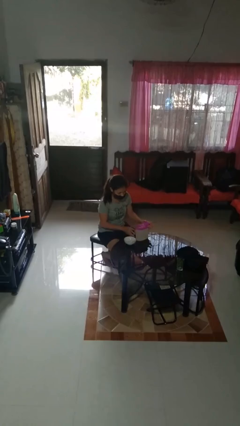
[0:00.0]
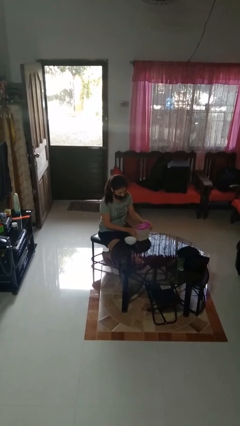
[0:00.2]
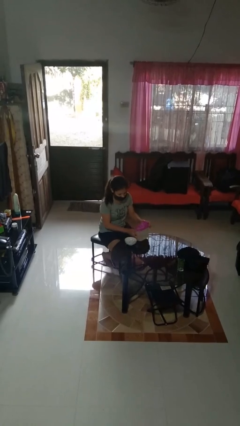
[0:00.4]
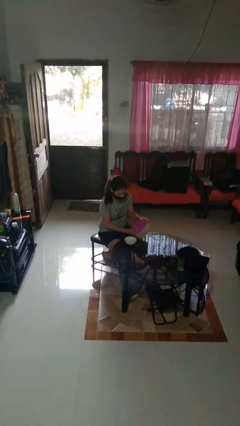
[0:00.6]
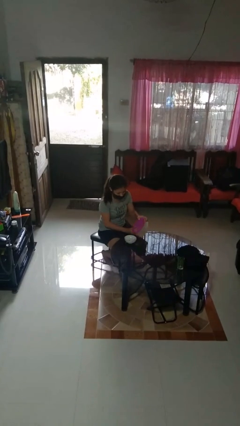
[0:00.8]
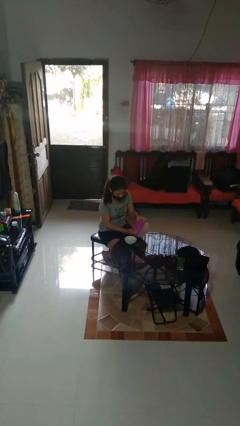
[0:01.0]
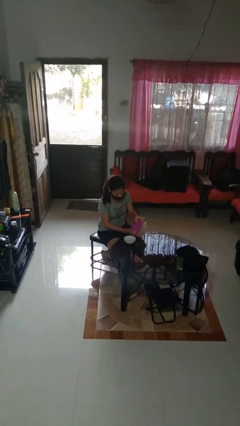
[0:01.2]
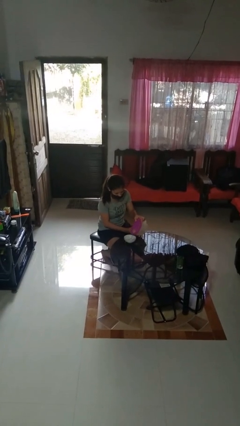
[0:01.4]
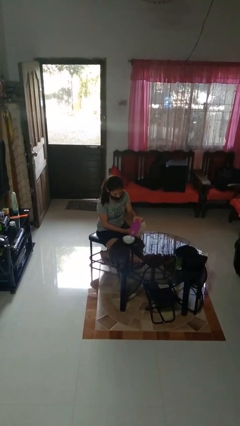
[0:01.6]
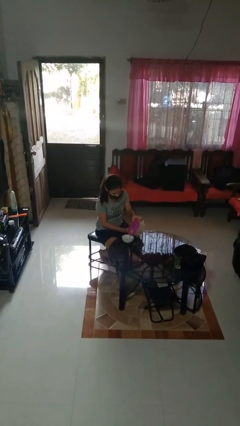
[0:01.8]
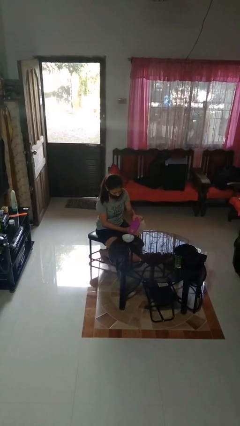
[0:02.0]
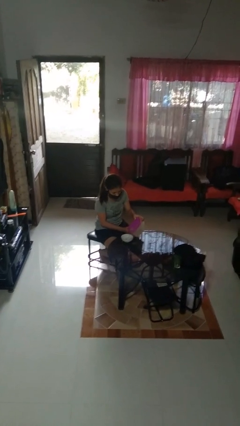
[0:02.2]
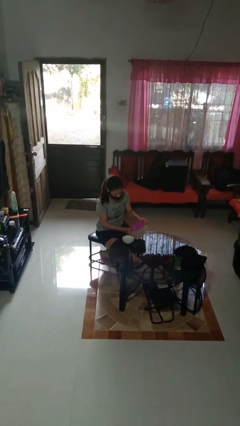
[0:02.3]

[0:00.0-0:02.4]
person pours into bowl

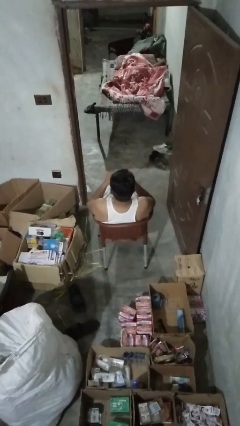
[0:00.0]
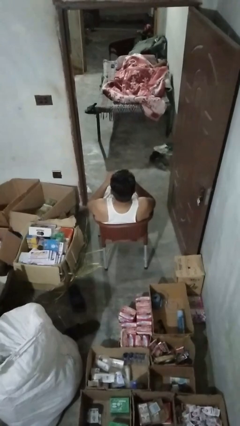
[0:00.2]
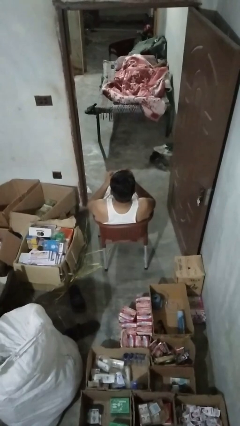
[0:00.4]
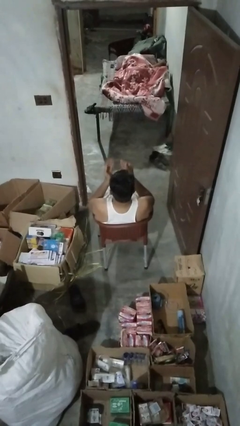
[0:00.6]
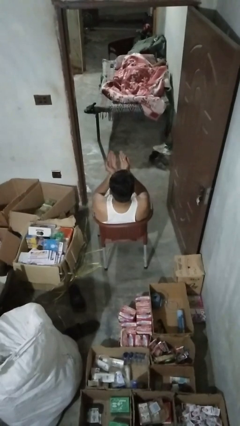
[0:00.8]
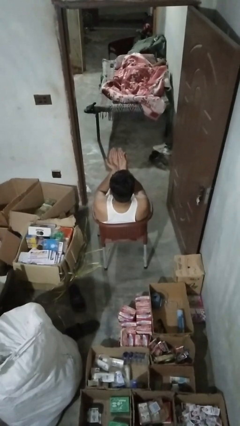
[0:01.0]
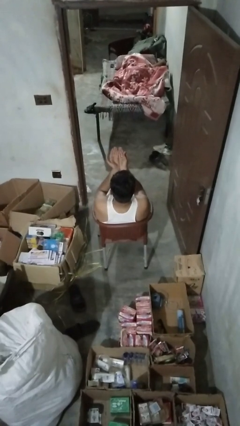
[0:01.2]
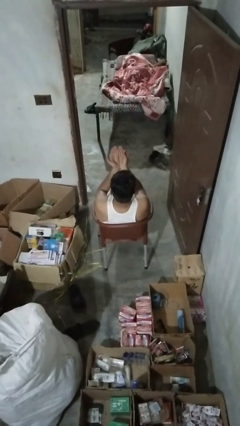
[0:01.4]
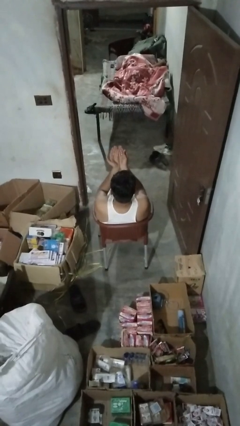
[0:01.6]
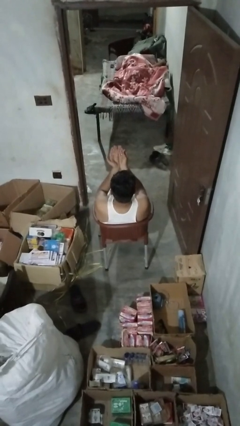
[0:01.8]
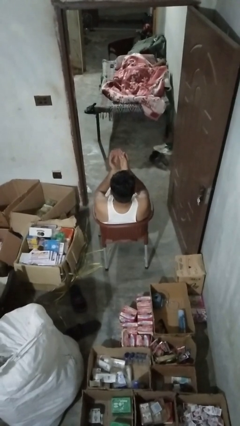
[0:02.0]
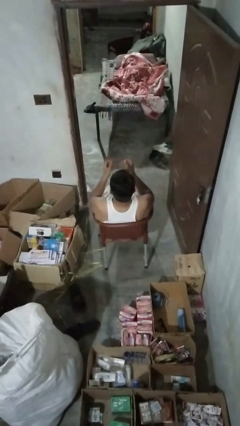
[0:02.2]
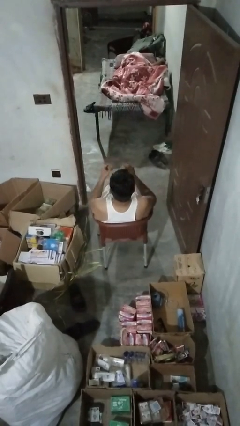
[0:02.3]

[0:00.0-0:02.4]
person prays

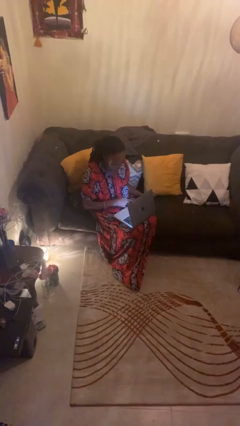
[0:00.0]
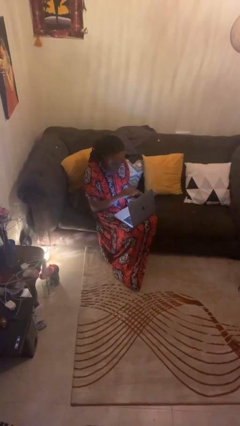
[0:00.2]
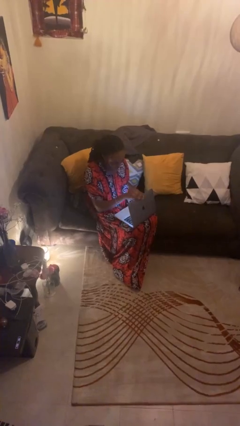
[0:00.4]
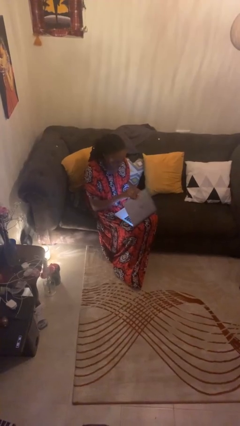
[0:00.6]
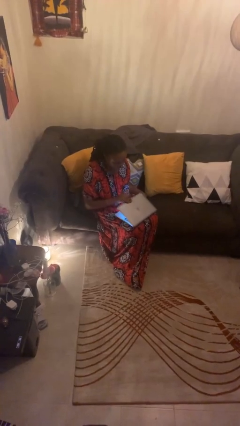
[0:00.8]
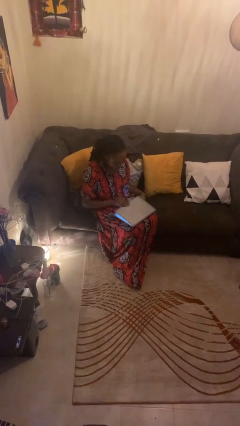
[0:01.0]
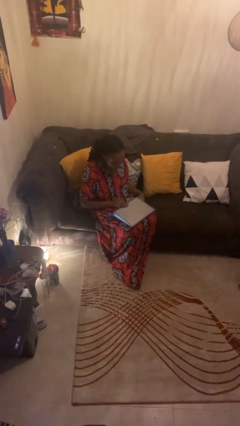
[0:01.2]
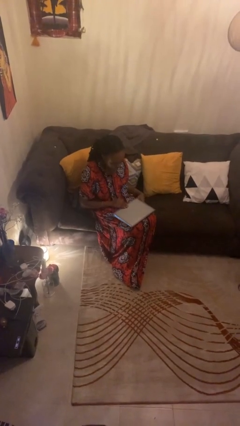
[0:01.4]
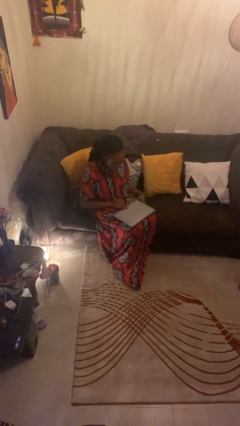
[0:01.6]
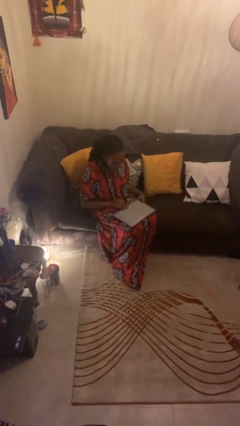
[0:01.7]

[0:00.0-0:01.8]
person closes laptop

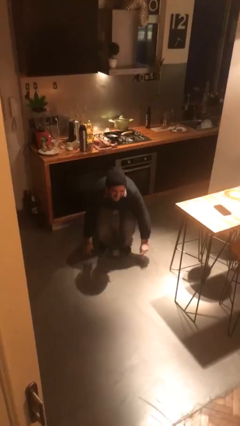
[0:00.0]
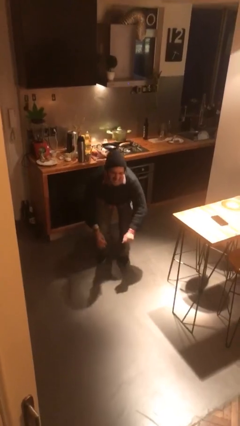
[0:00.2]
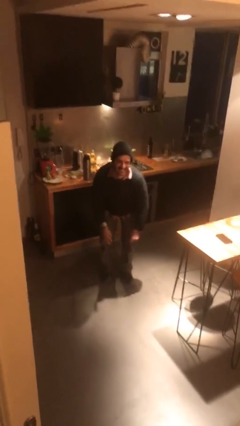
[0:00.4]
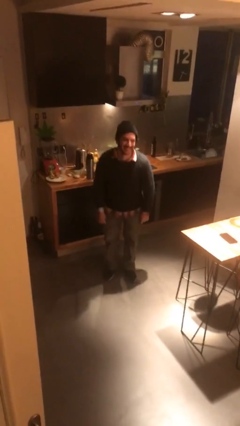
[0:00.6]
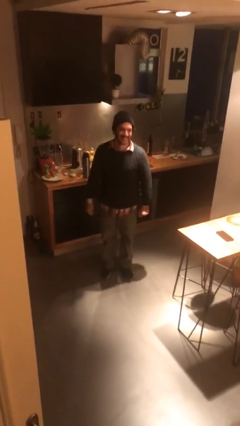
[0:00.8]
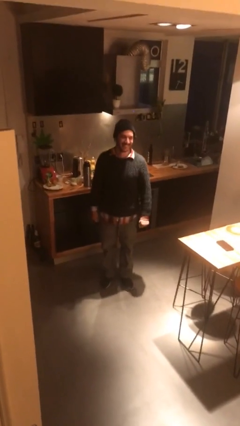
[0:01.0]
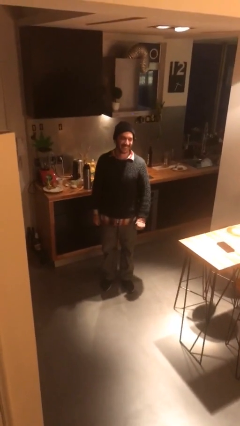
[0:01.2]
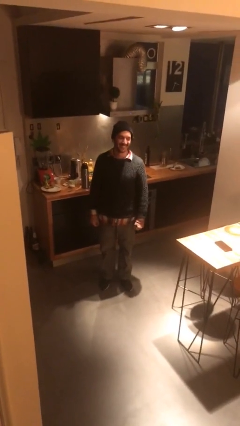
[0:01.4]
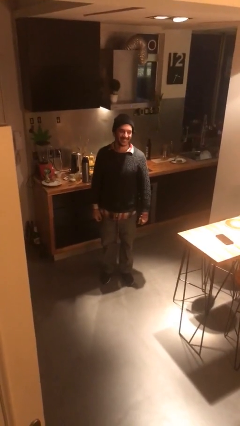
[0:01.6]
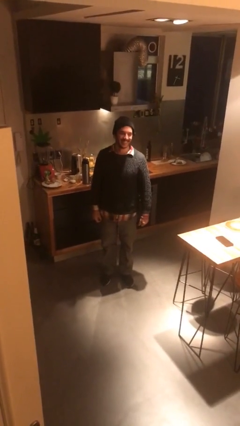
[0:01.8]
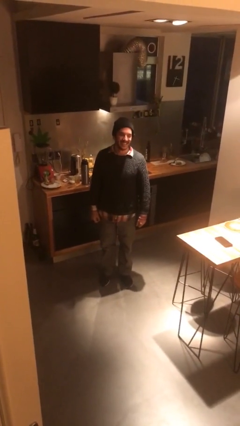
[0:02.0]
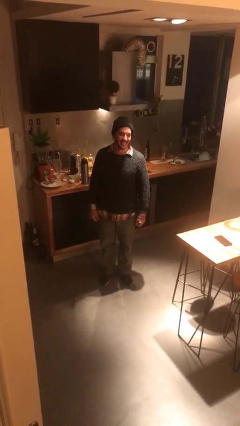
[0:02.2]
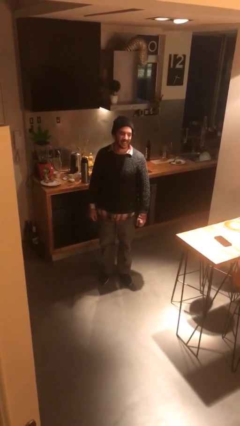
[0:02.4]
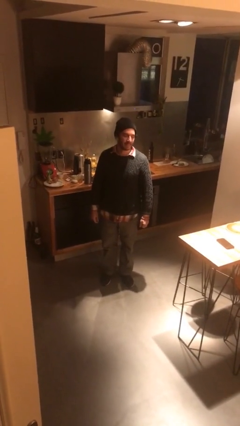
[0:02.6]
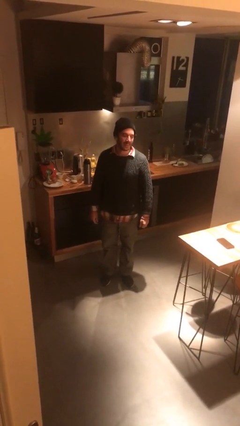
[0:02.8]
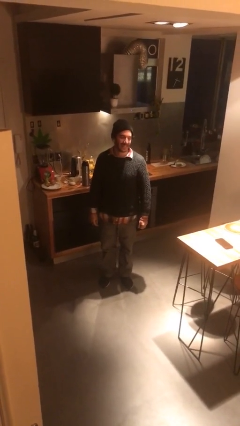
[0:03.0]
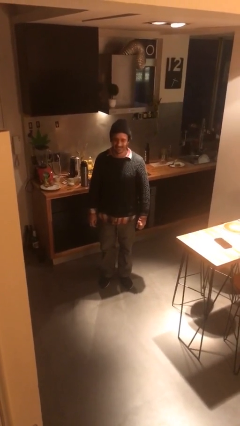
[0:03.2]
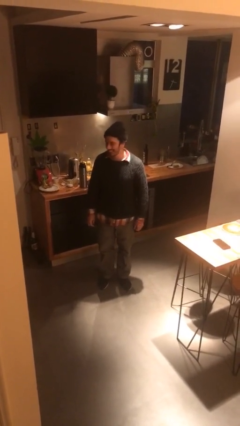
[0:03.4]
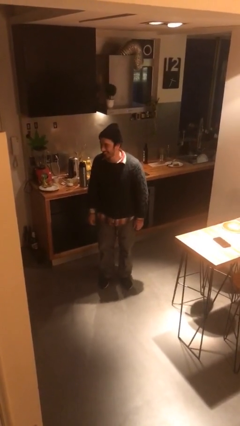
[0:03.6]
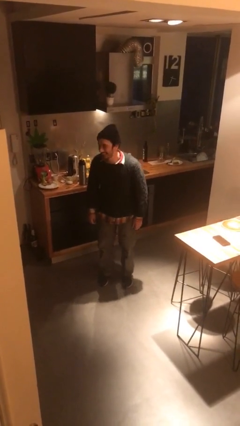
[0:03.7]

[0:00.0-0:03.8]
person stands up

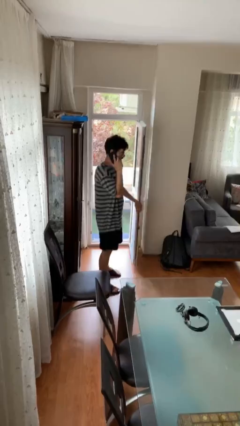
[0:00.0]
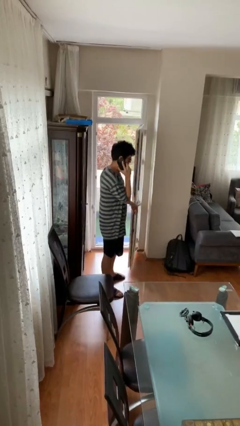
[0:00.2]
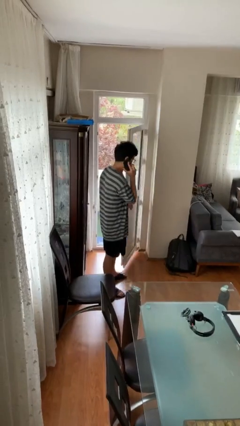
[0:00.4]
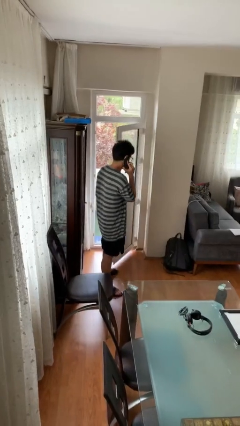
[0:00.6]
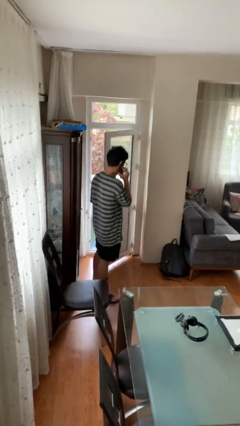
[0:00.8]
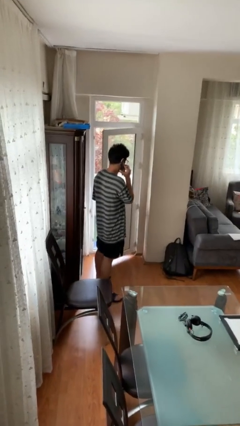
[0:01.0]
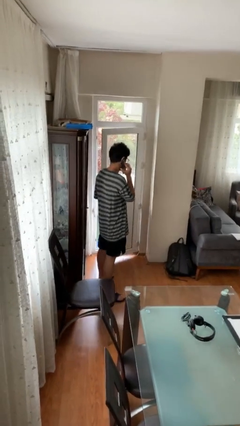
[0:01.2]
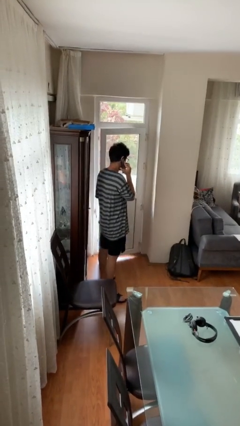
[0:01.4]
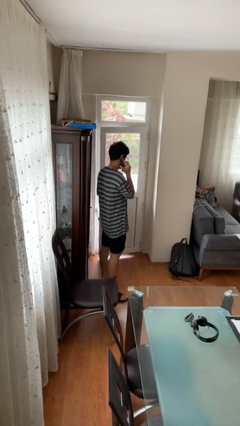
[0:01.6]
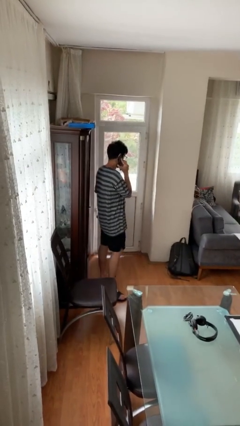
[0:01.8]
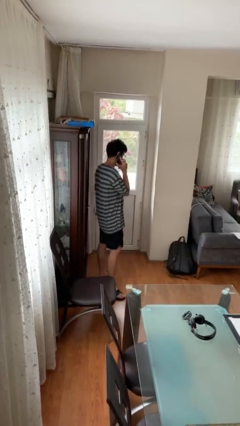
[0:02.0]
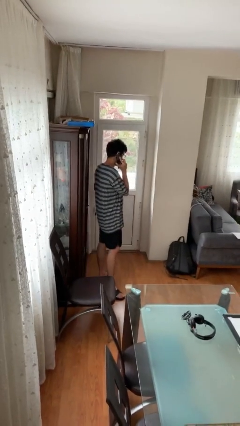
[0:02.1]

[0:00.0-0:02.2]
person closes facility door

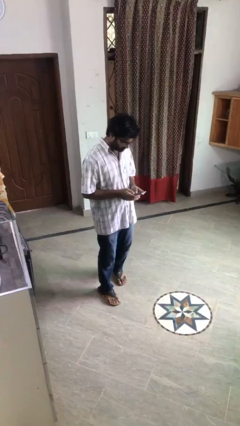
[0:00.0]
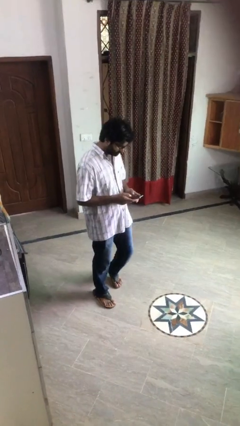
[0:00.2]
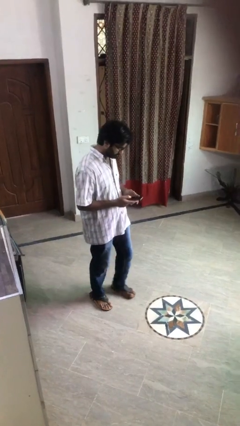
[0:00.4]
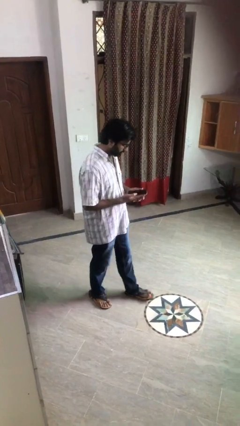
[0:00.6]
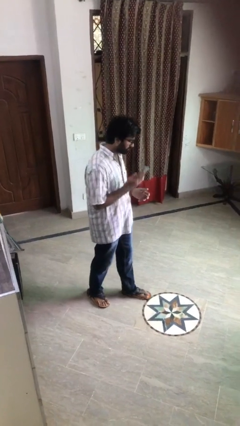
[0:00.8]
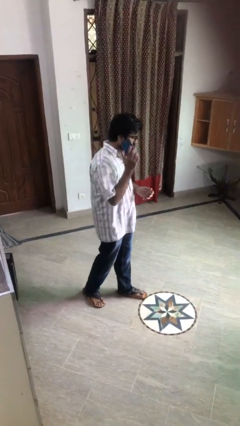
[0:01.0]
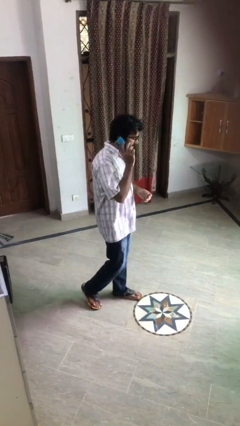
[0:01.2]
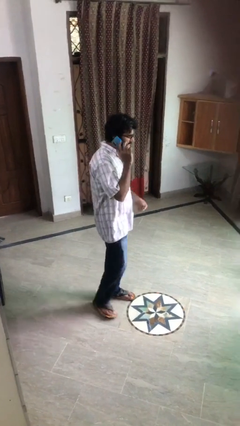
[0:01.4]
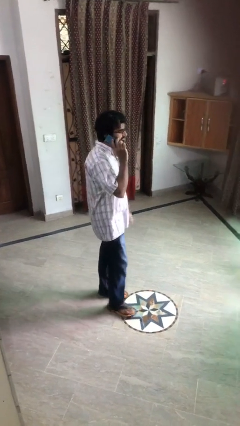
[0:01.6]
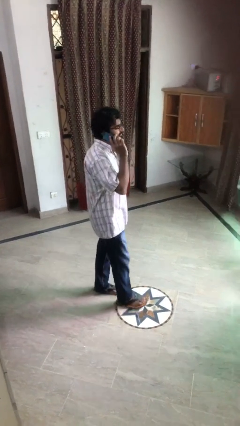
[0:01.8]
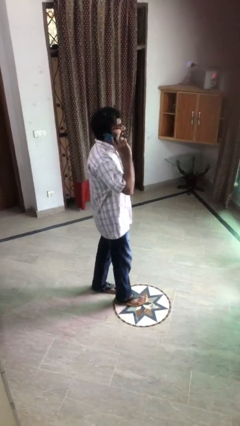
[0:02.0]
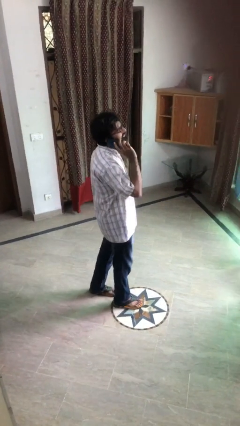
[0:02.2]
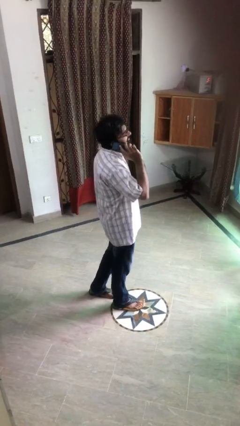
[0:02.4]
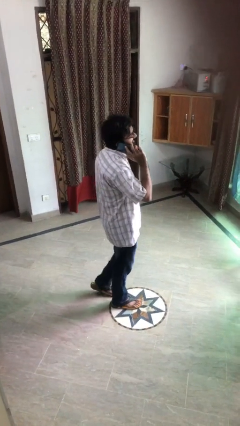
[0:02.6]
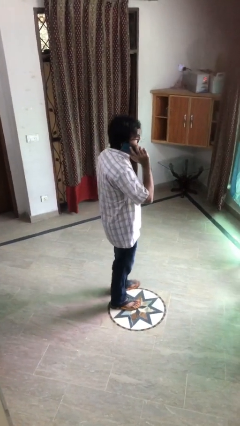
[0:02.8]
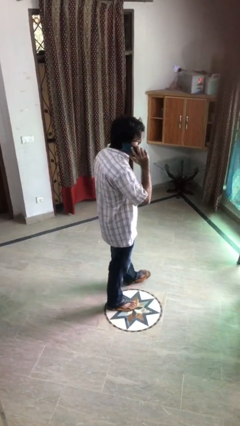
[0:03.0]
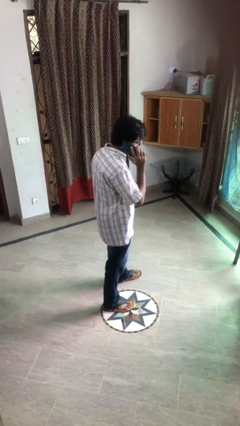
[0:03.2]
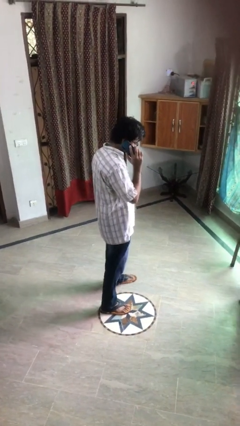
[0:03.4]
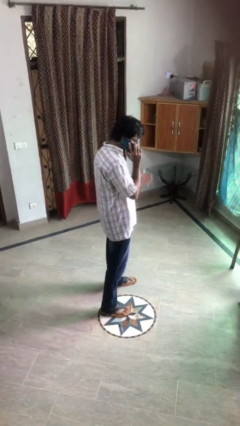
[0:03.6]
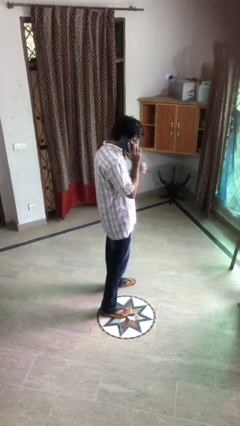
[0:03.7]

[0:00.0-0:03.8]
person talks on phone

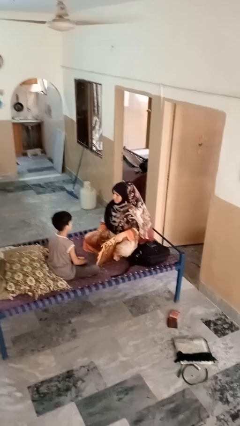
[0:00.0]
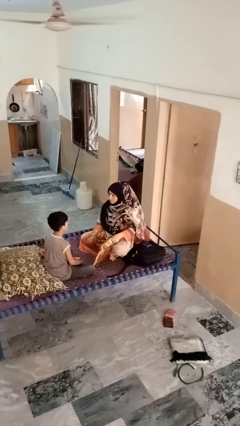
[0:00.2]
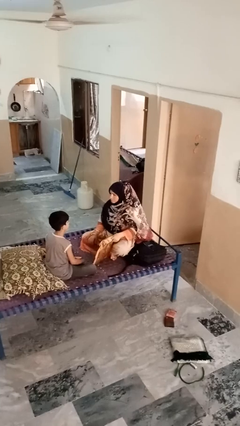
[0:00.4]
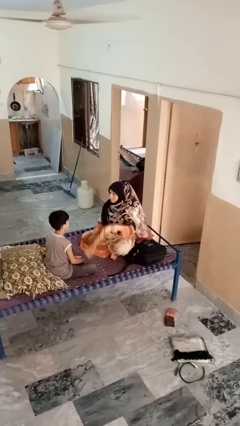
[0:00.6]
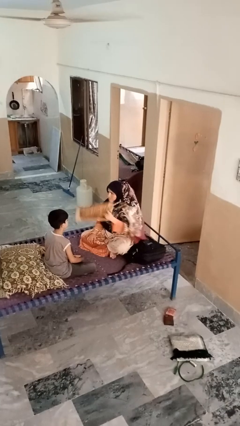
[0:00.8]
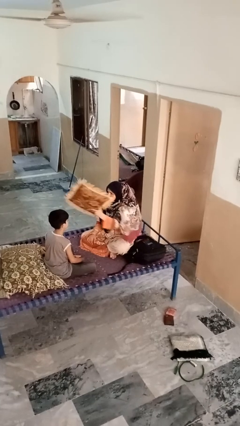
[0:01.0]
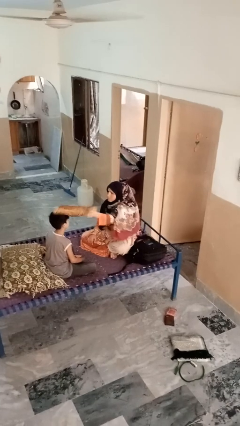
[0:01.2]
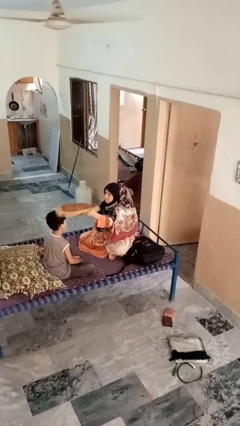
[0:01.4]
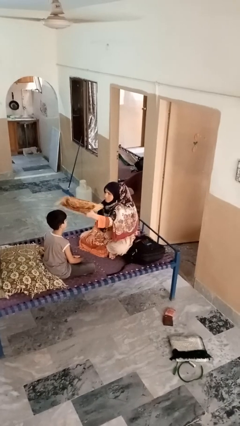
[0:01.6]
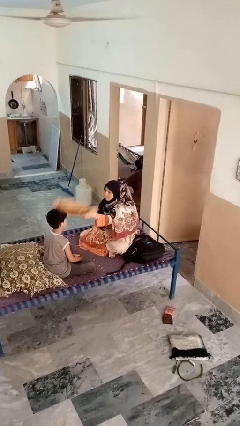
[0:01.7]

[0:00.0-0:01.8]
person hits person with pillow
